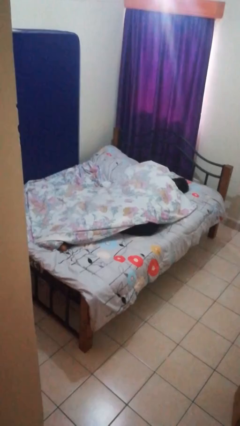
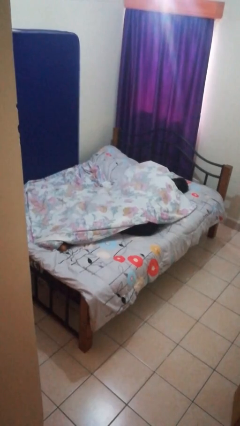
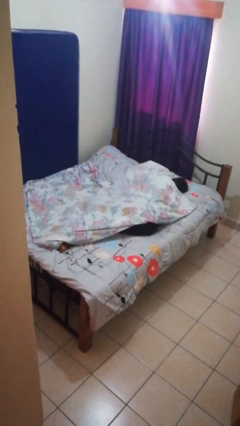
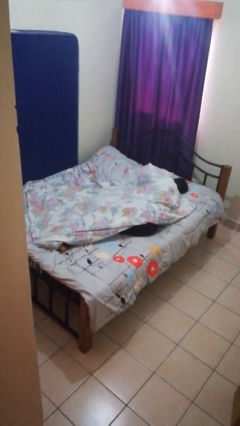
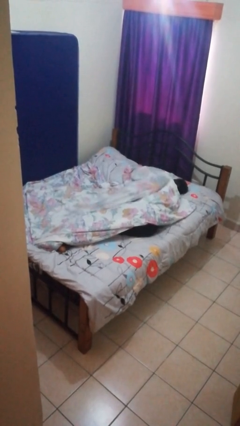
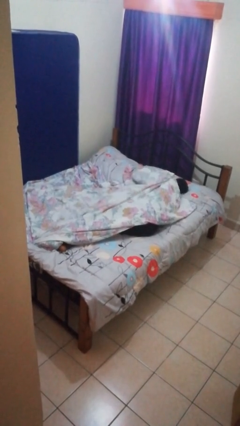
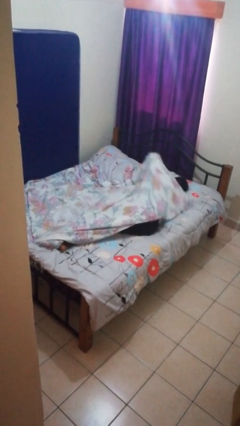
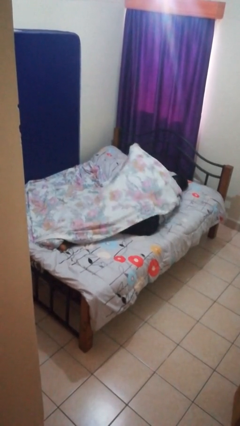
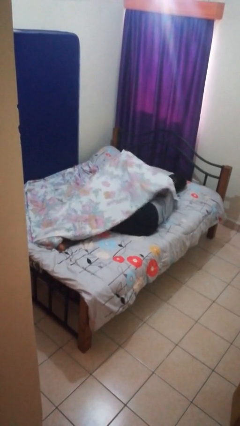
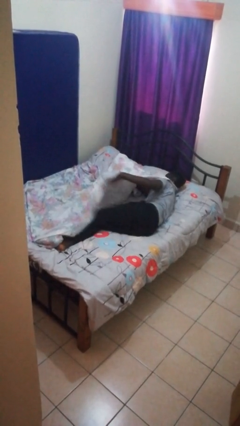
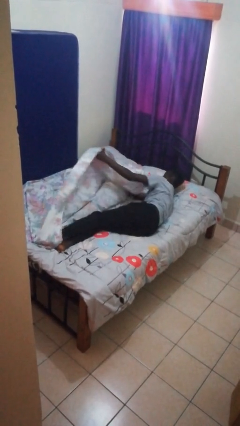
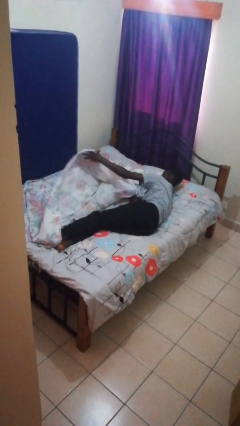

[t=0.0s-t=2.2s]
person uncovers with bedsheets

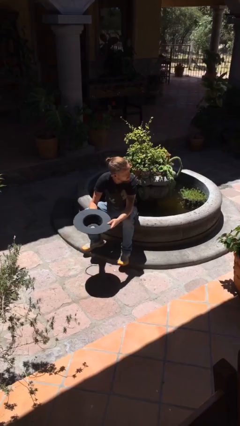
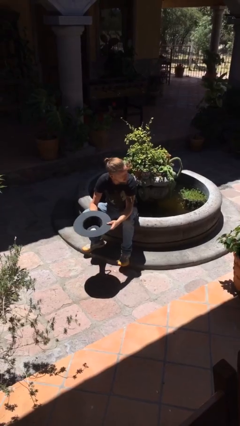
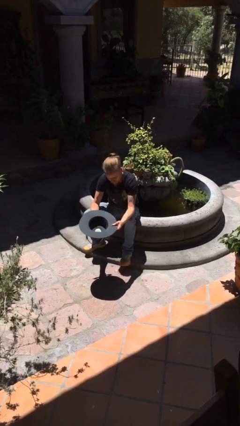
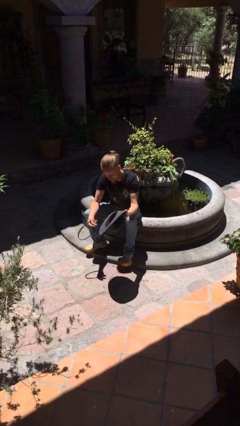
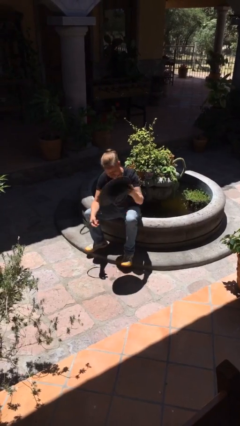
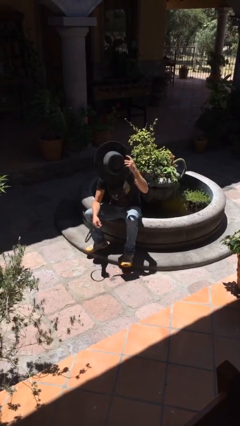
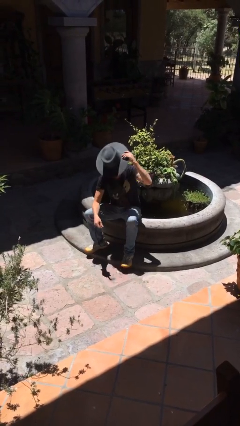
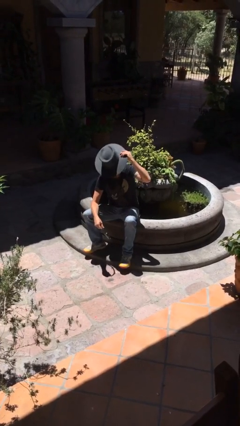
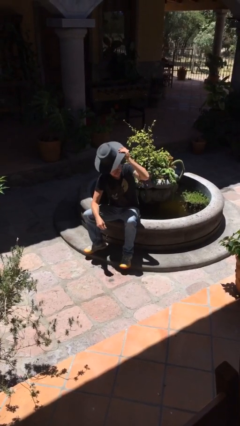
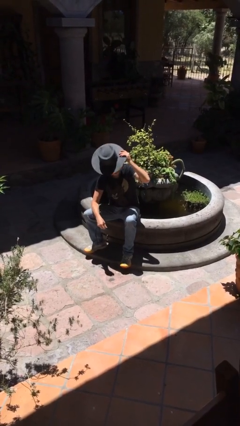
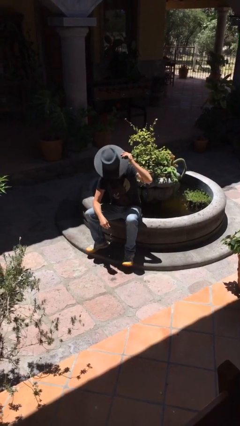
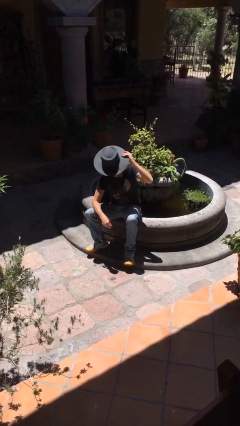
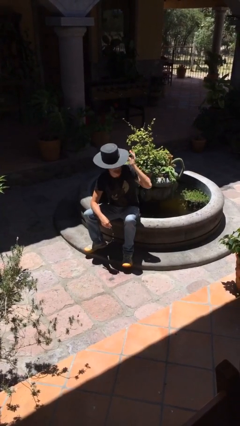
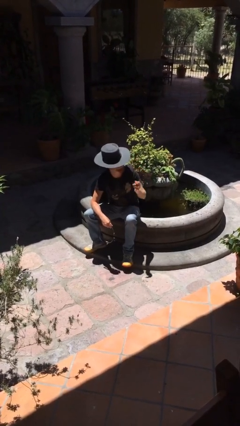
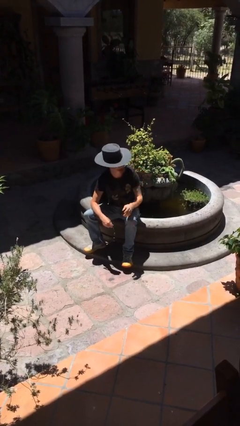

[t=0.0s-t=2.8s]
person puts on hat

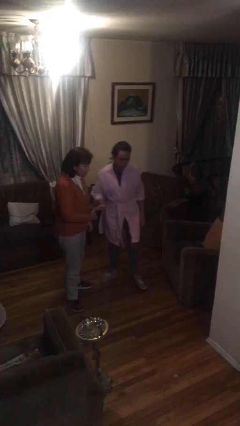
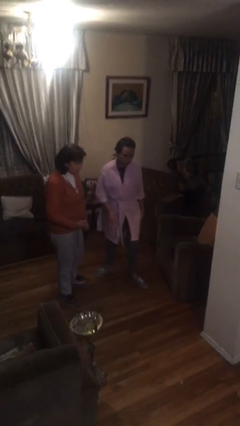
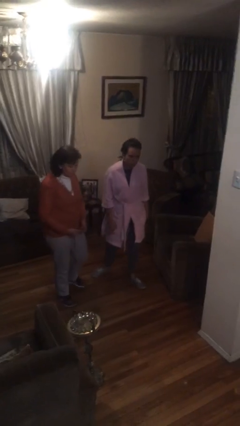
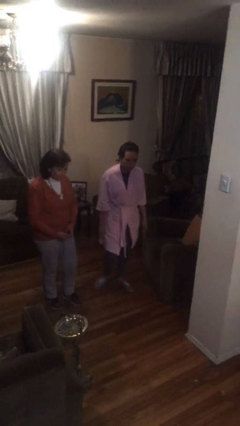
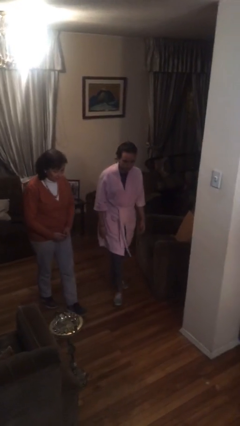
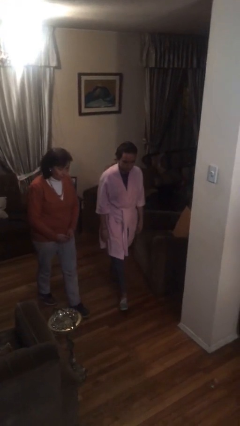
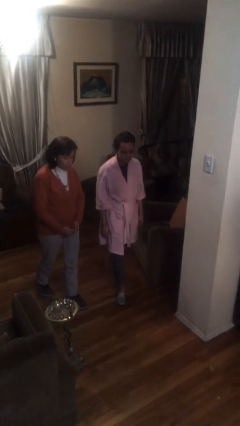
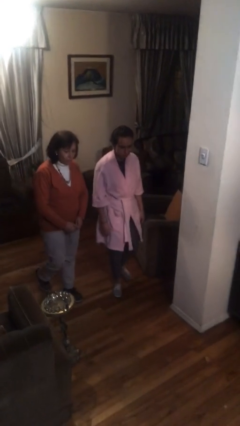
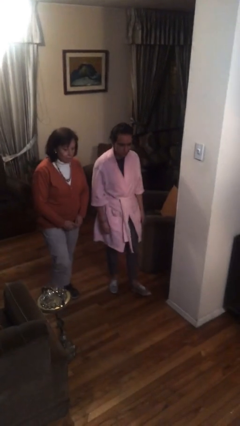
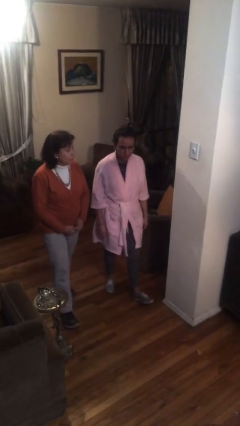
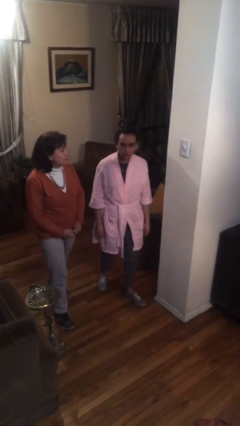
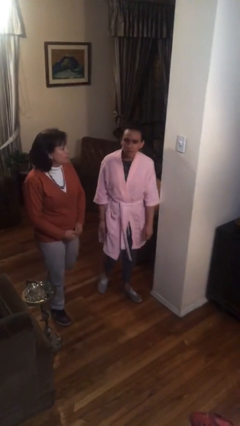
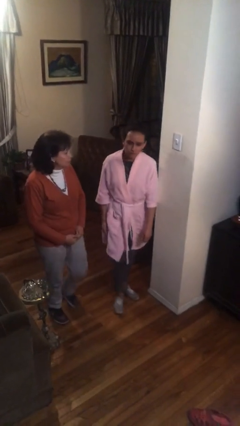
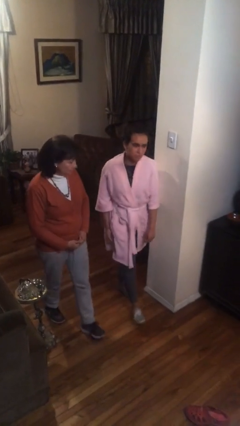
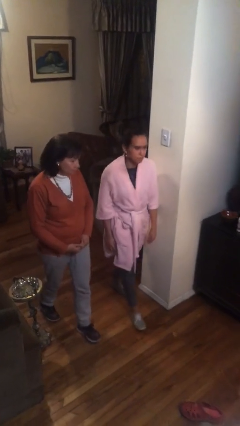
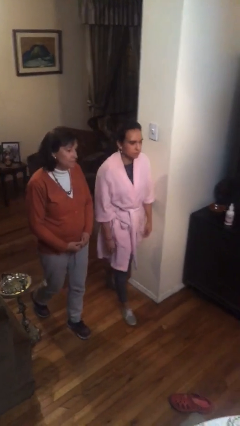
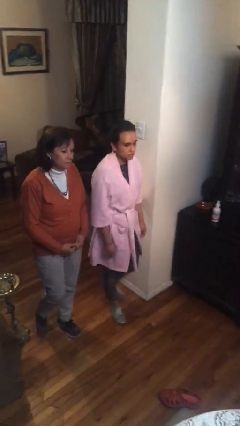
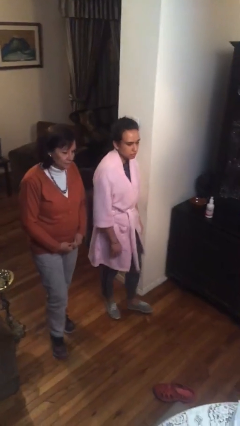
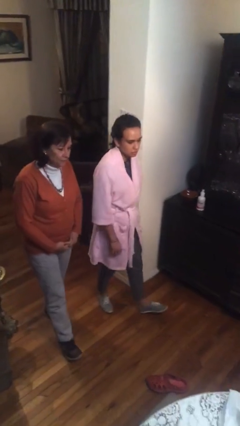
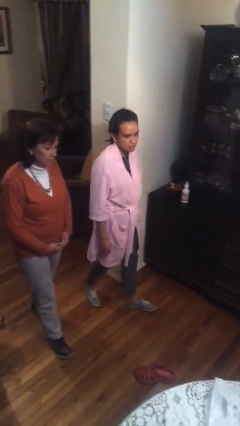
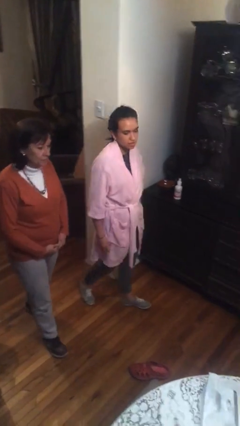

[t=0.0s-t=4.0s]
person talks to person

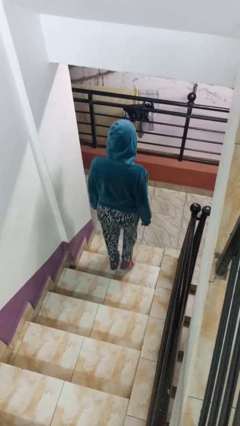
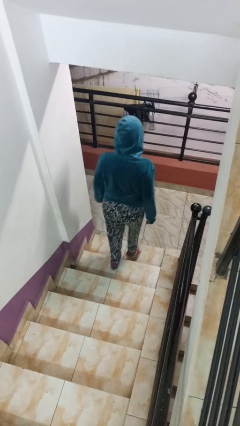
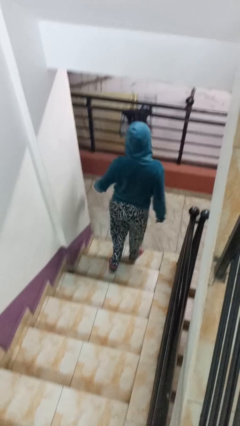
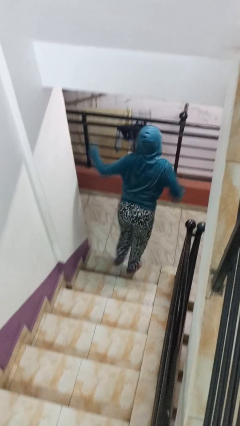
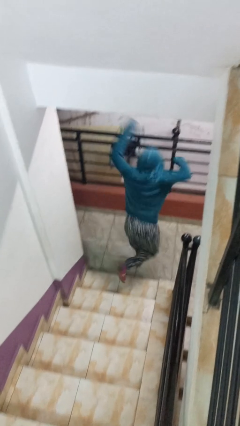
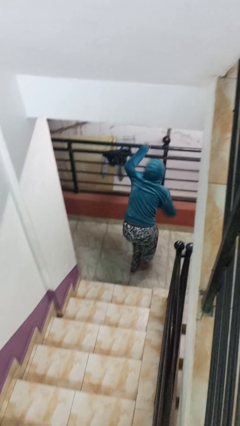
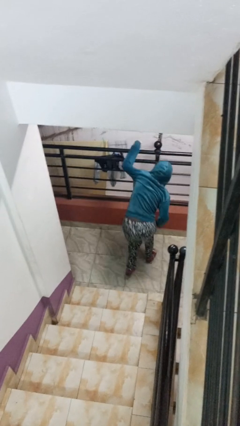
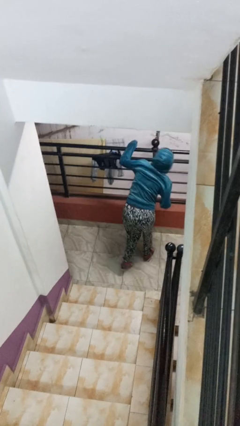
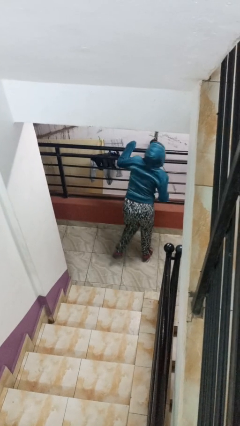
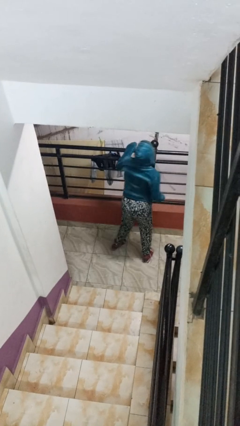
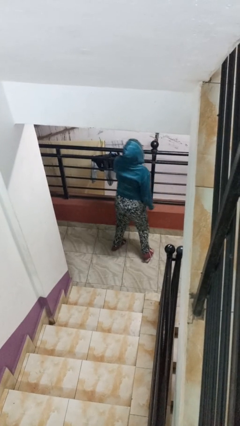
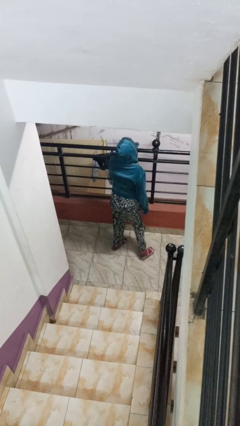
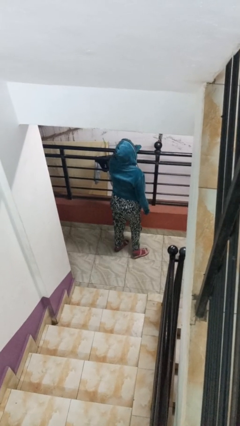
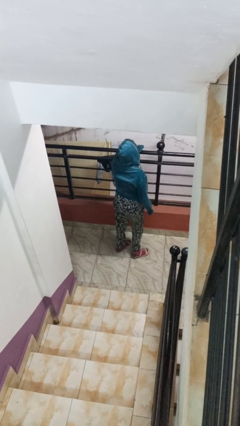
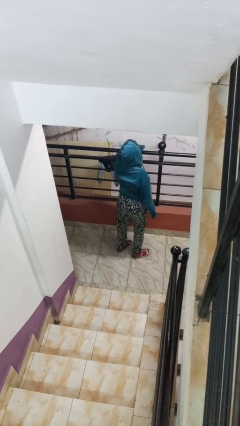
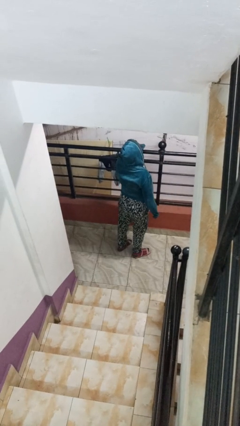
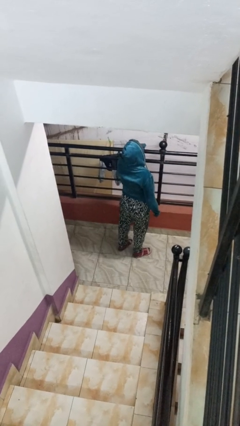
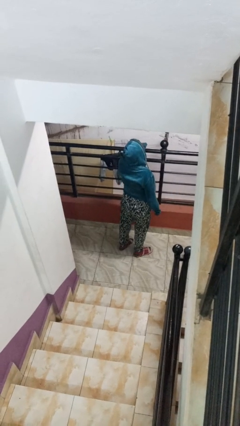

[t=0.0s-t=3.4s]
person trips on stair

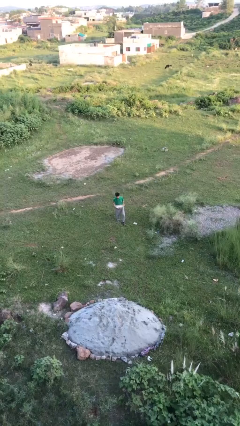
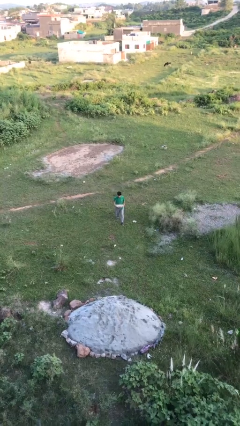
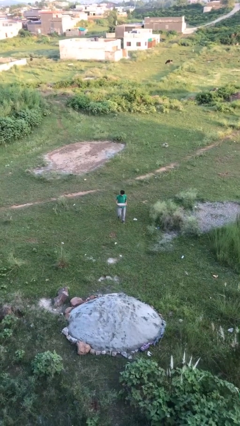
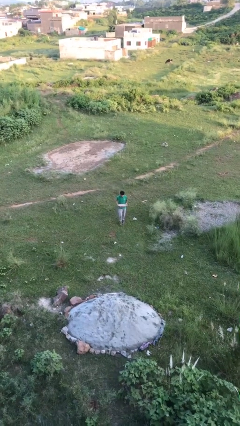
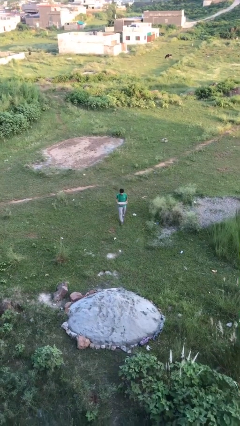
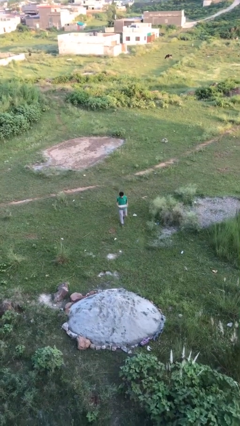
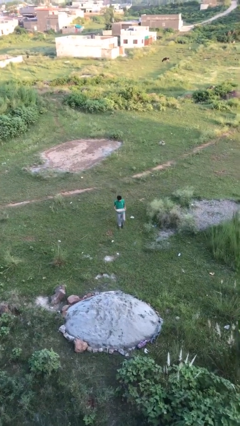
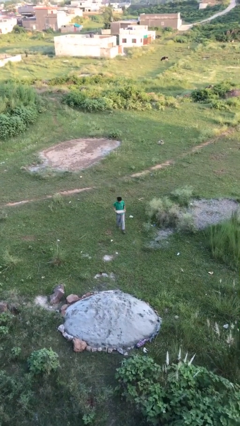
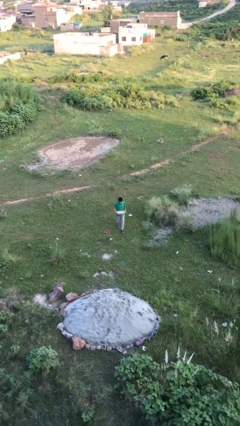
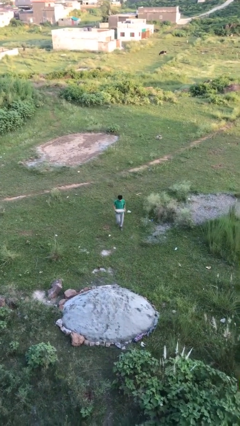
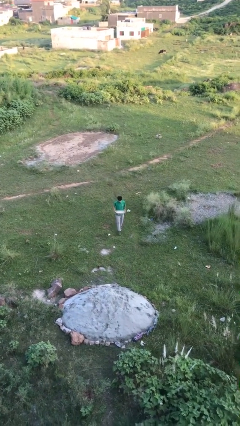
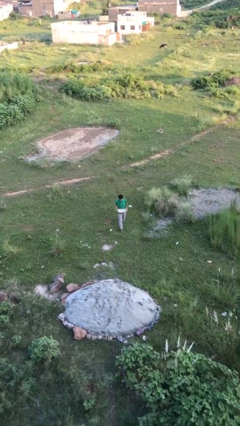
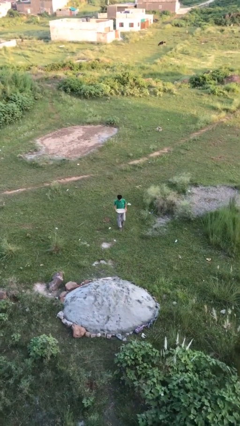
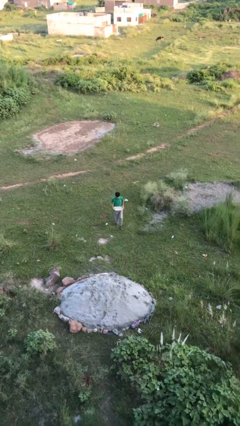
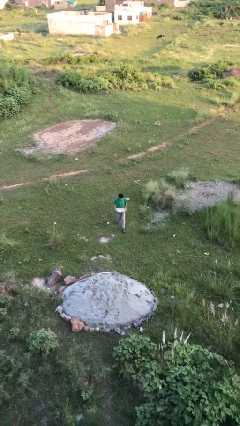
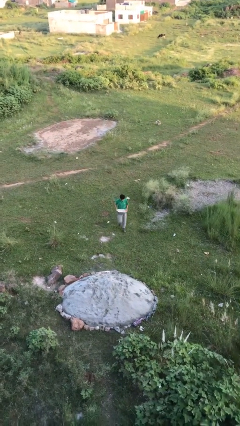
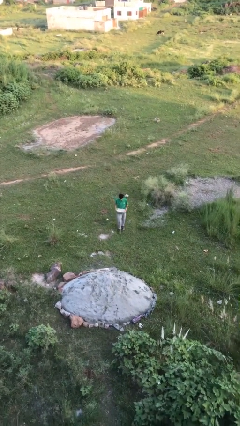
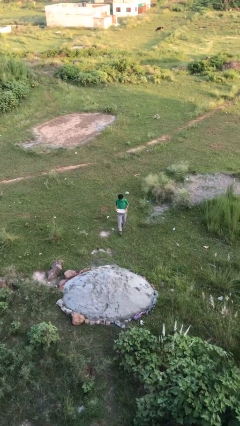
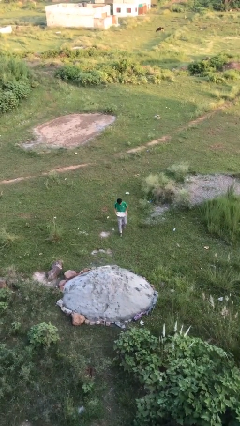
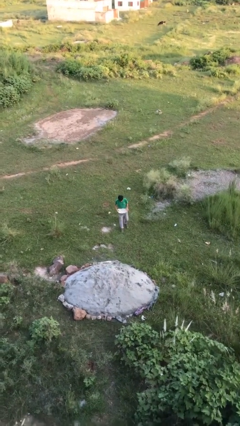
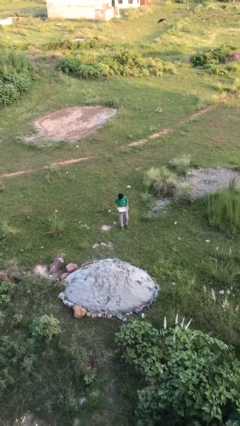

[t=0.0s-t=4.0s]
person carries heavy object

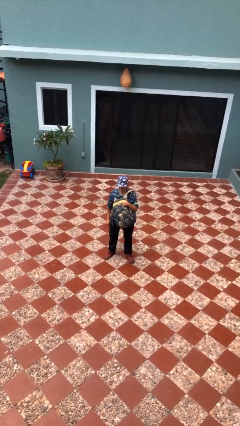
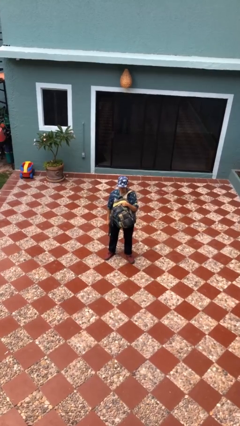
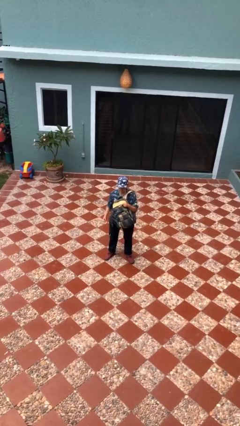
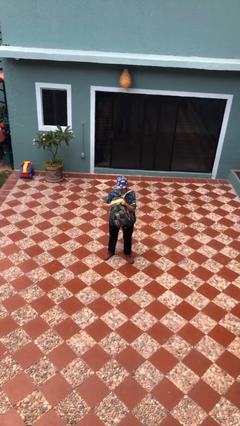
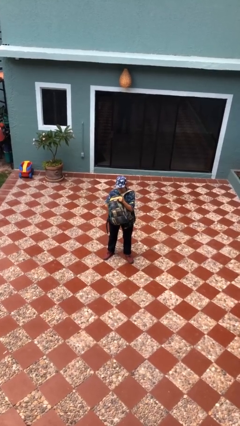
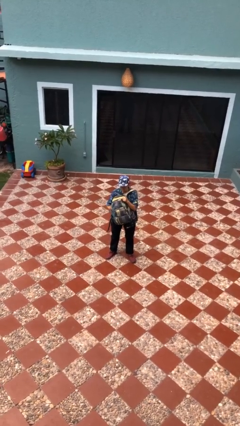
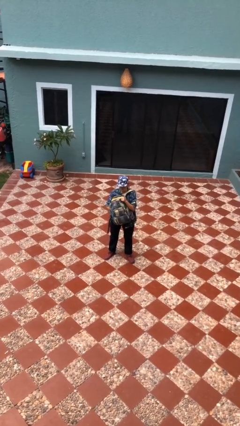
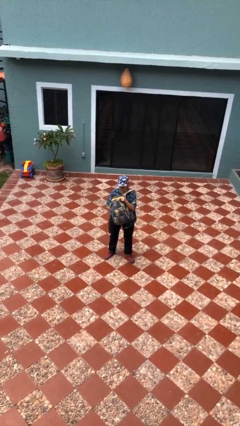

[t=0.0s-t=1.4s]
person searches in backpack
